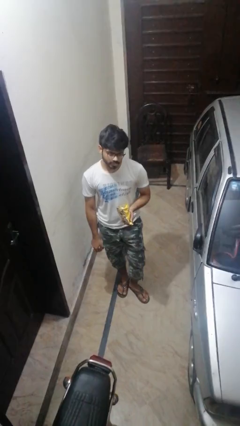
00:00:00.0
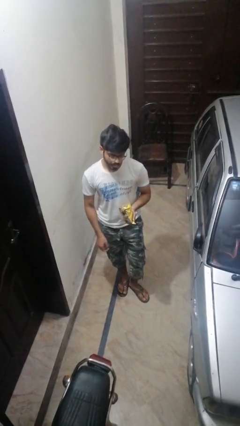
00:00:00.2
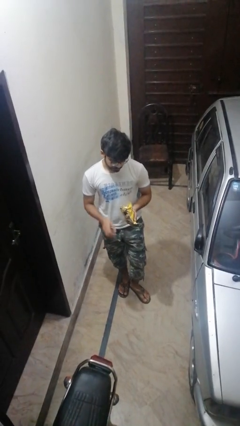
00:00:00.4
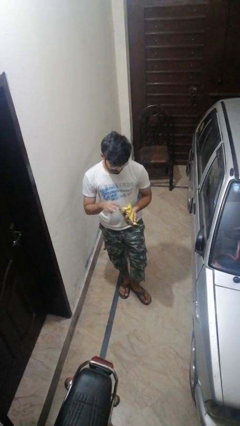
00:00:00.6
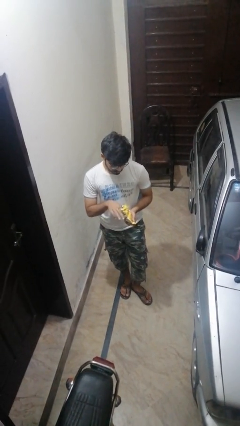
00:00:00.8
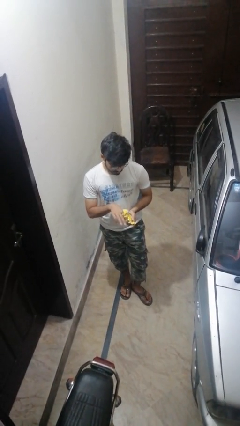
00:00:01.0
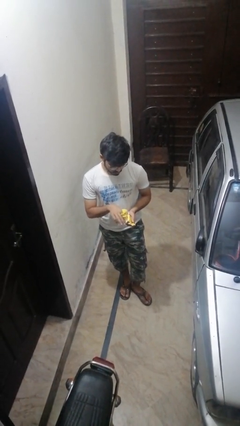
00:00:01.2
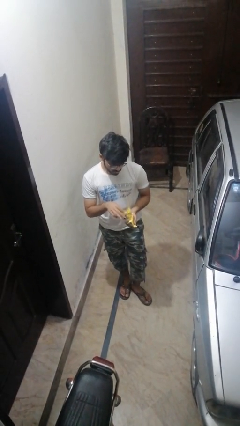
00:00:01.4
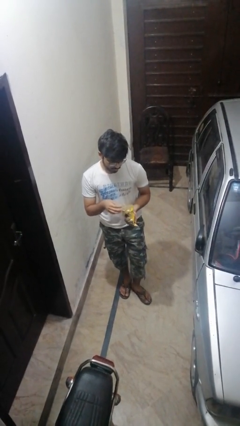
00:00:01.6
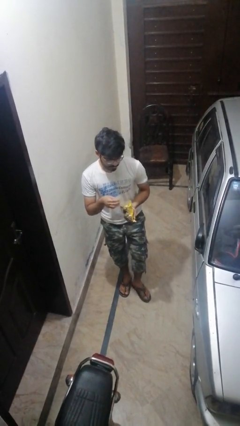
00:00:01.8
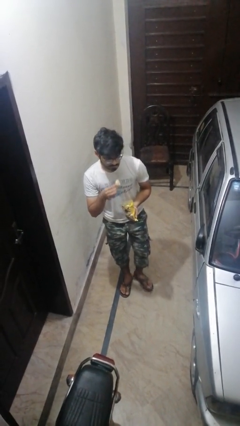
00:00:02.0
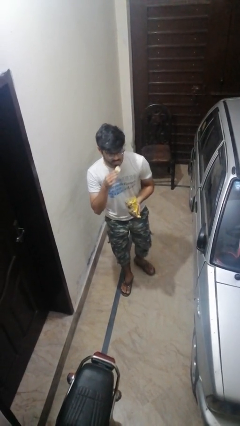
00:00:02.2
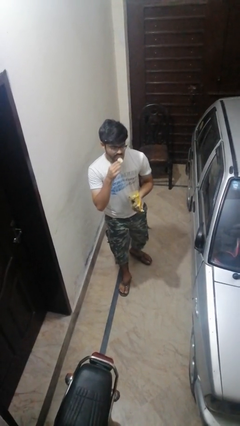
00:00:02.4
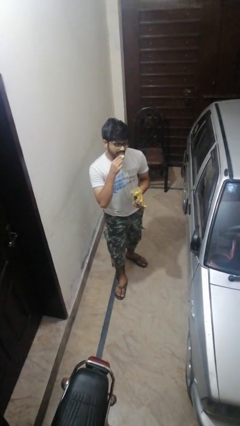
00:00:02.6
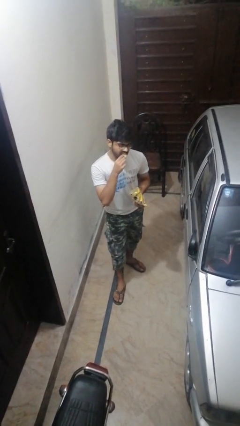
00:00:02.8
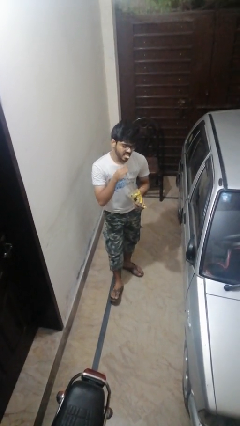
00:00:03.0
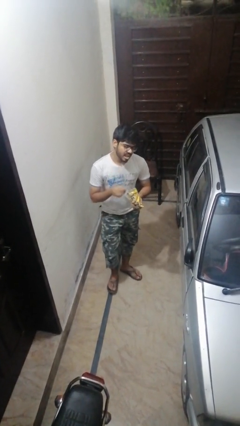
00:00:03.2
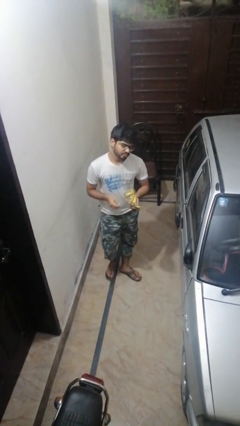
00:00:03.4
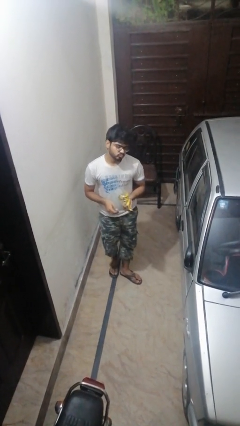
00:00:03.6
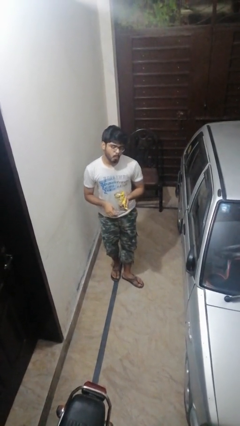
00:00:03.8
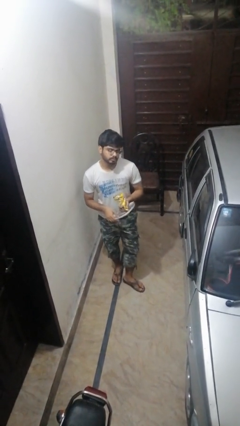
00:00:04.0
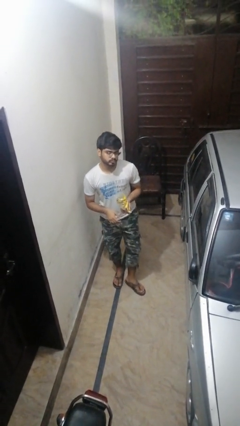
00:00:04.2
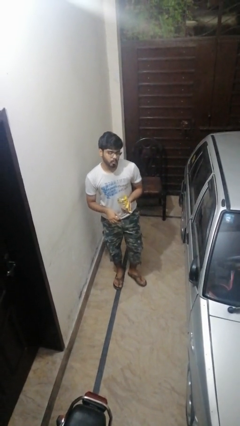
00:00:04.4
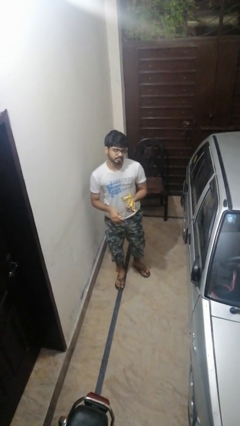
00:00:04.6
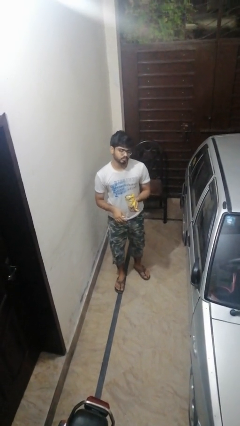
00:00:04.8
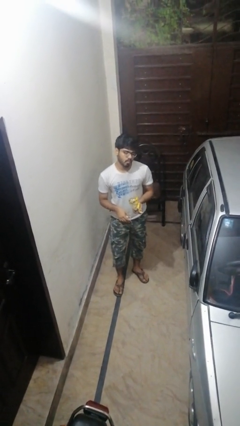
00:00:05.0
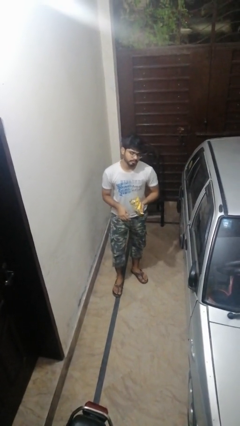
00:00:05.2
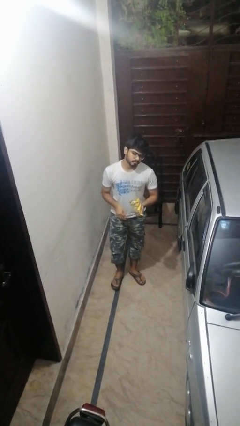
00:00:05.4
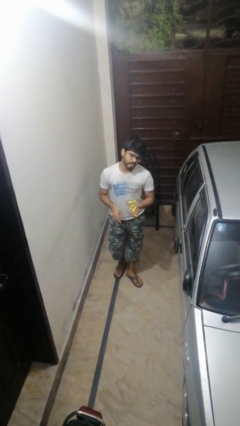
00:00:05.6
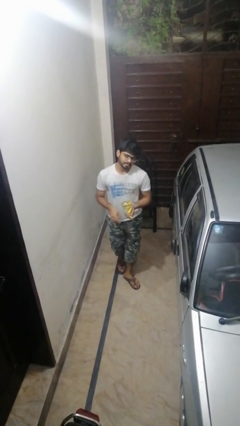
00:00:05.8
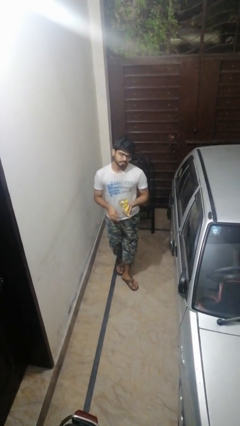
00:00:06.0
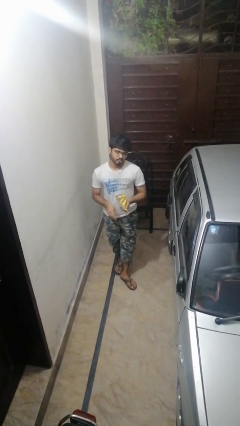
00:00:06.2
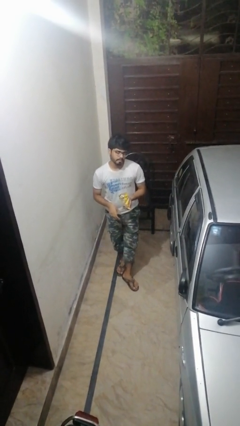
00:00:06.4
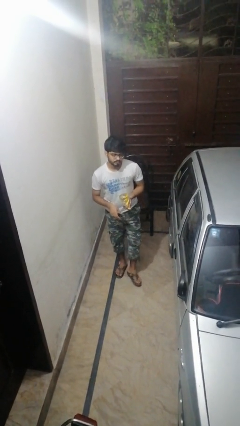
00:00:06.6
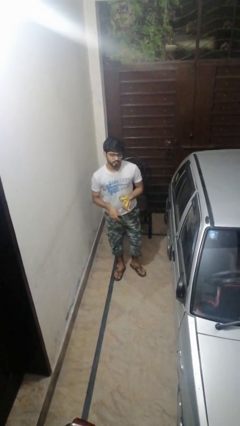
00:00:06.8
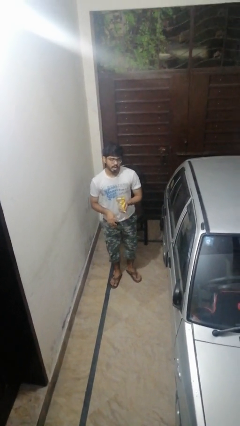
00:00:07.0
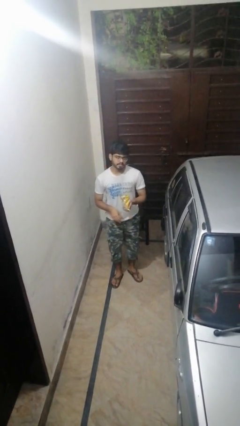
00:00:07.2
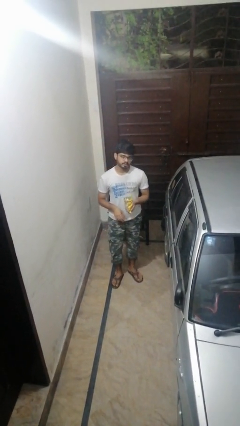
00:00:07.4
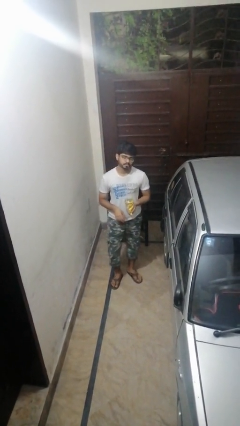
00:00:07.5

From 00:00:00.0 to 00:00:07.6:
person eats snack from bag

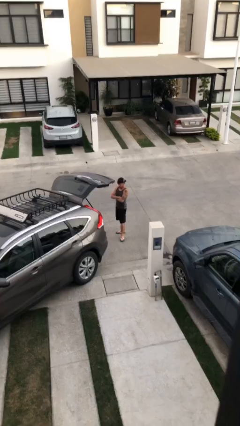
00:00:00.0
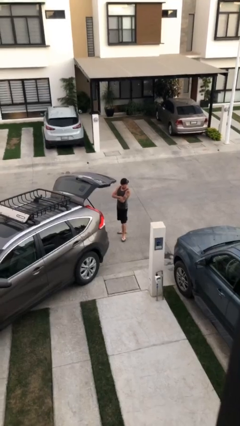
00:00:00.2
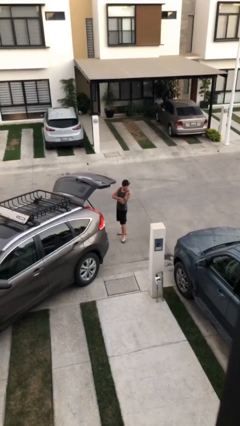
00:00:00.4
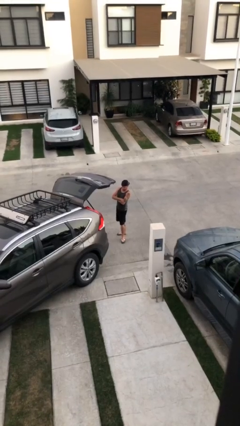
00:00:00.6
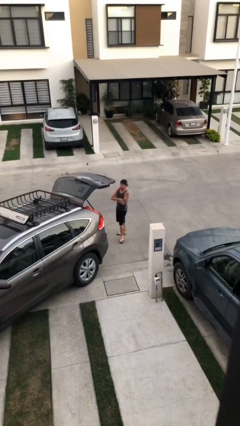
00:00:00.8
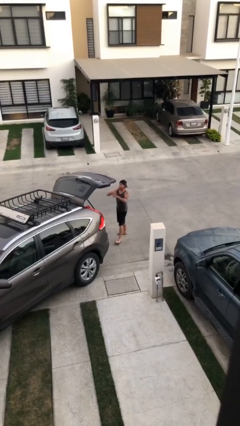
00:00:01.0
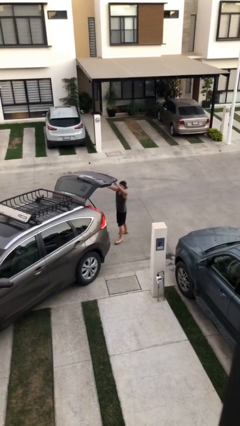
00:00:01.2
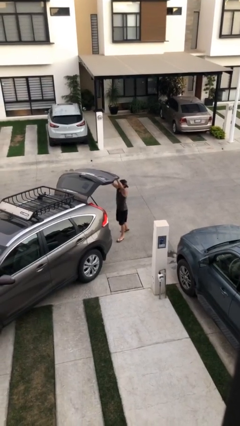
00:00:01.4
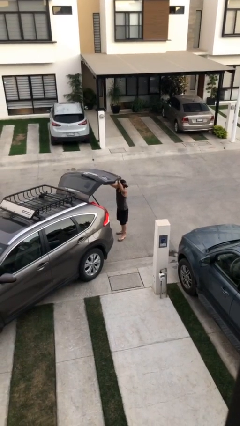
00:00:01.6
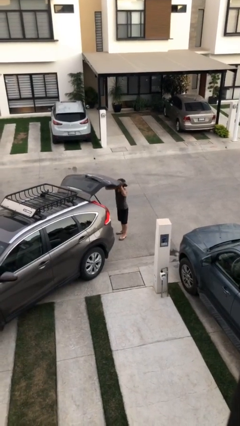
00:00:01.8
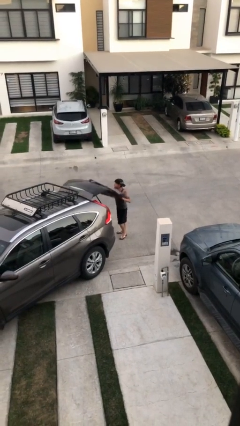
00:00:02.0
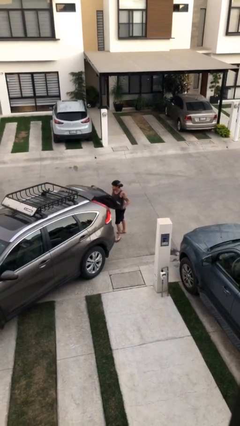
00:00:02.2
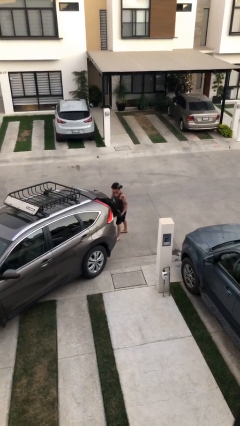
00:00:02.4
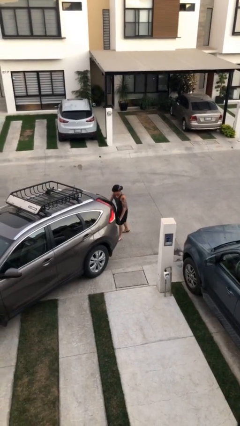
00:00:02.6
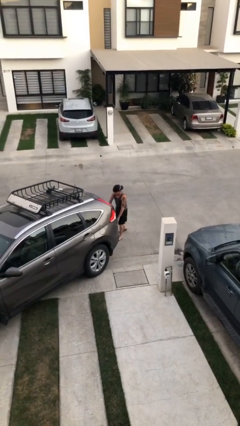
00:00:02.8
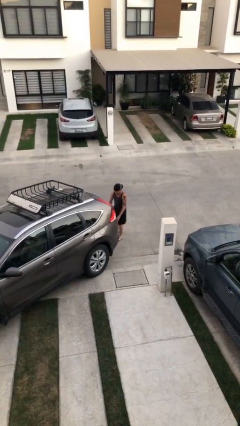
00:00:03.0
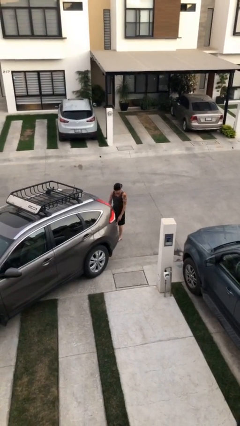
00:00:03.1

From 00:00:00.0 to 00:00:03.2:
person closes car trunk

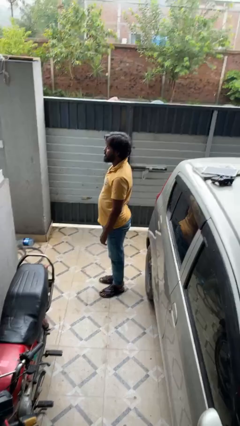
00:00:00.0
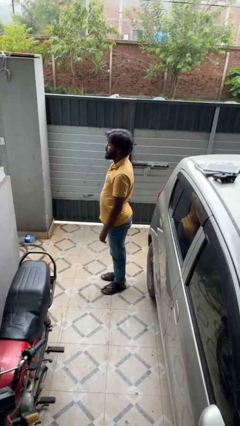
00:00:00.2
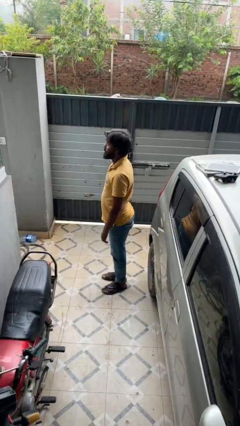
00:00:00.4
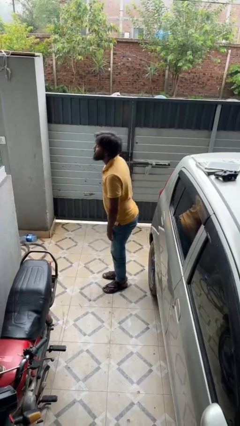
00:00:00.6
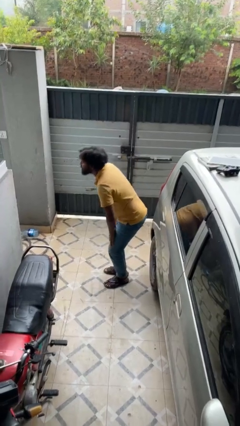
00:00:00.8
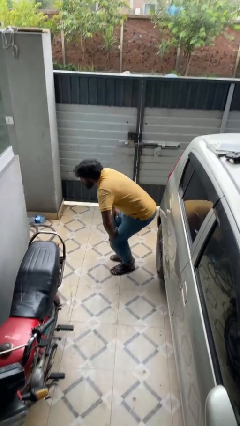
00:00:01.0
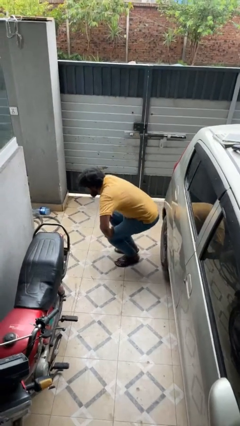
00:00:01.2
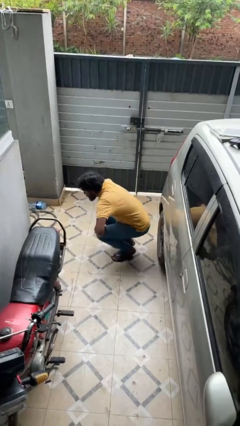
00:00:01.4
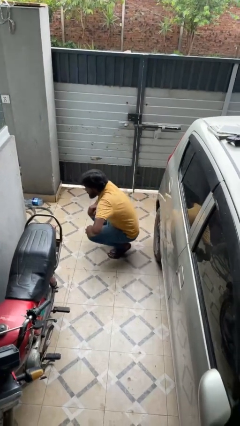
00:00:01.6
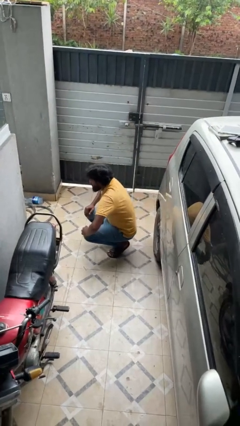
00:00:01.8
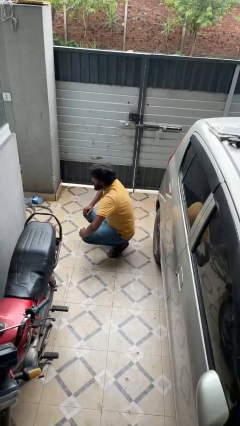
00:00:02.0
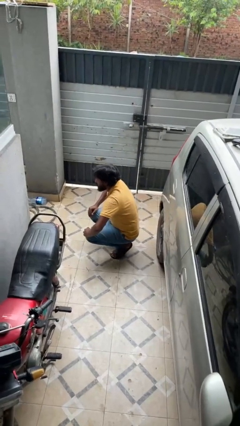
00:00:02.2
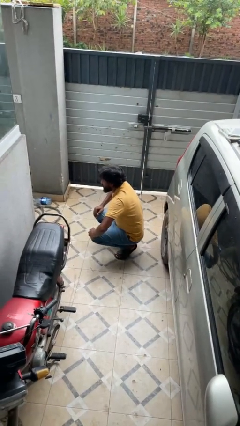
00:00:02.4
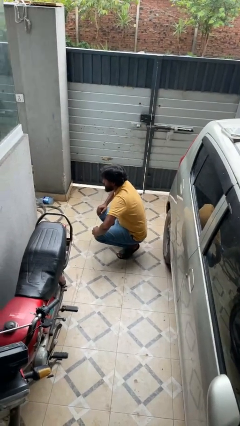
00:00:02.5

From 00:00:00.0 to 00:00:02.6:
person squats

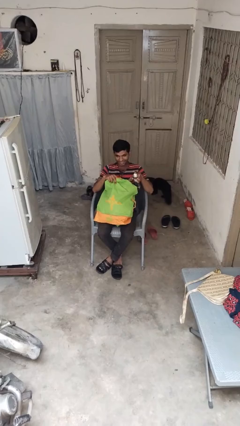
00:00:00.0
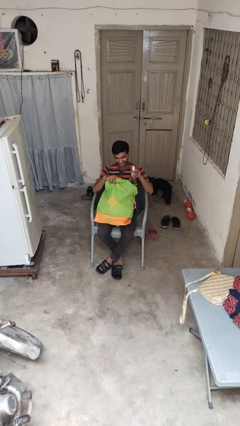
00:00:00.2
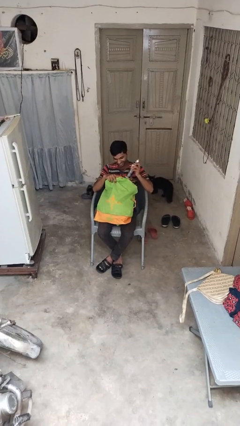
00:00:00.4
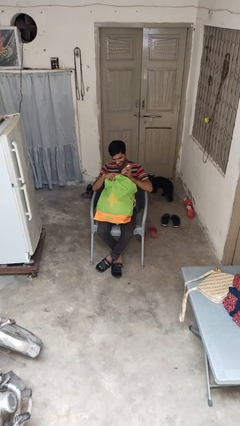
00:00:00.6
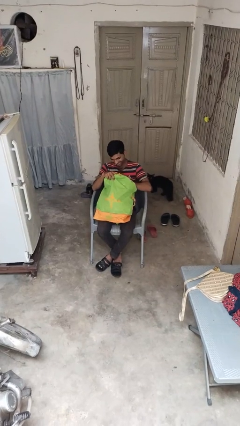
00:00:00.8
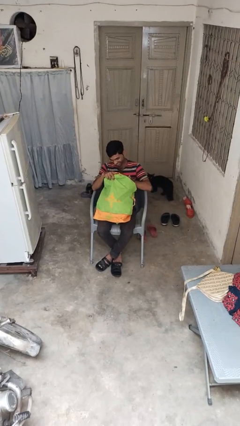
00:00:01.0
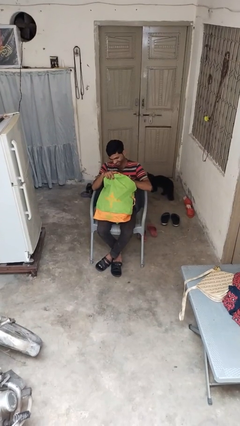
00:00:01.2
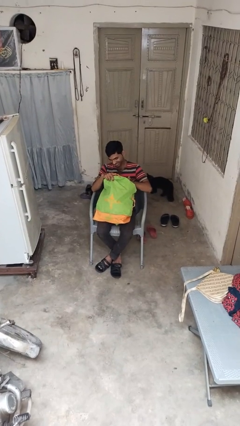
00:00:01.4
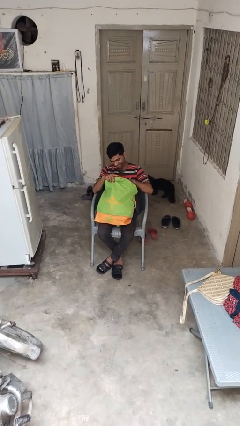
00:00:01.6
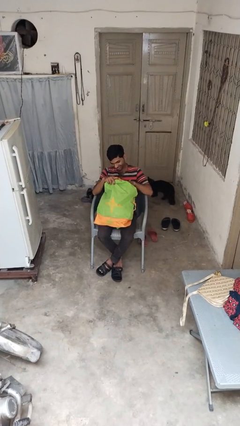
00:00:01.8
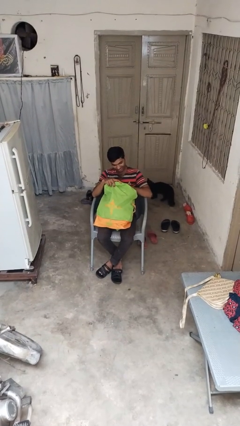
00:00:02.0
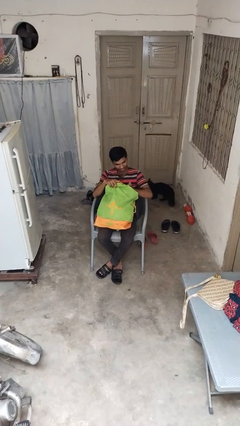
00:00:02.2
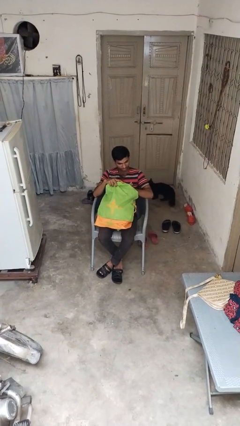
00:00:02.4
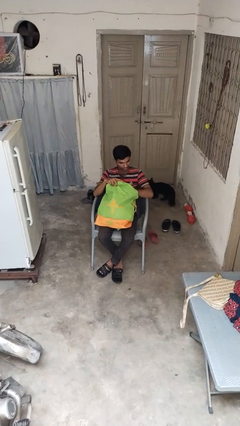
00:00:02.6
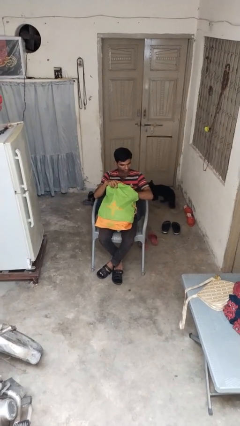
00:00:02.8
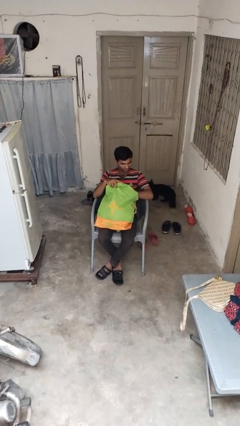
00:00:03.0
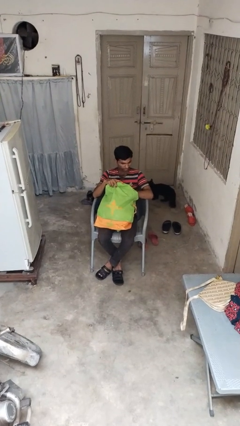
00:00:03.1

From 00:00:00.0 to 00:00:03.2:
person puts object into backpack

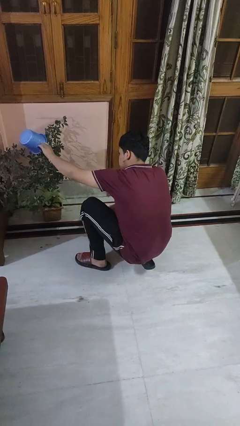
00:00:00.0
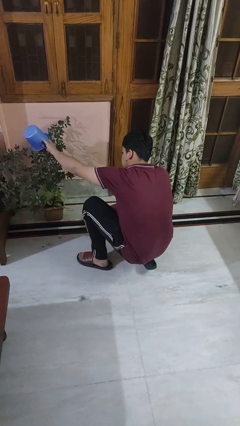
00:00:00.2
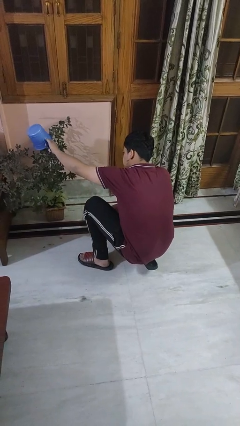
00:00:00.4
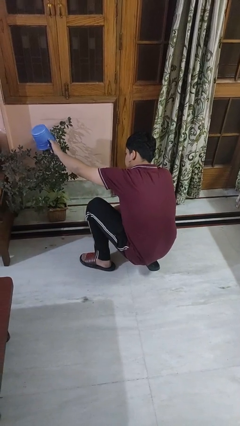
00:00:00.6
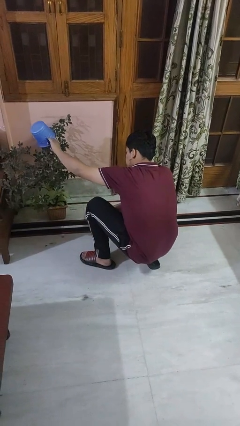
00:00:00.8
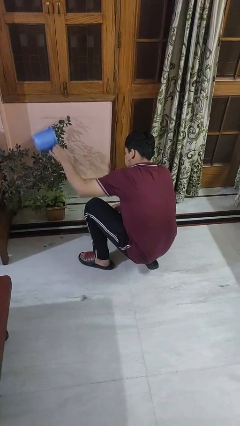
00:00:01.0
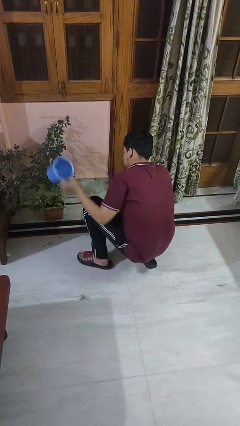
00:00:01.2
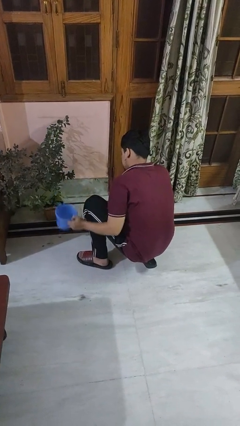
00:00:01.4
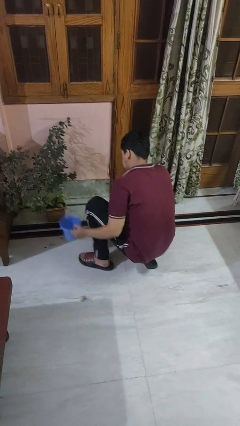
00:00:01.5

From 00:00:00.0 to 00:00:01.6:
person waters houseplant
